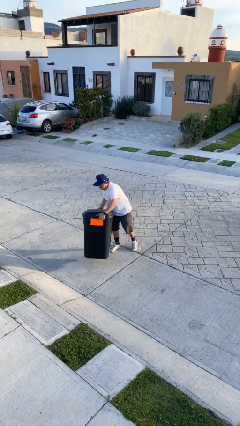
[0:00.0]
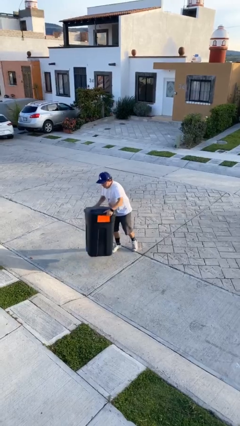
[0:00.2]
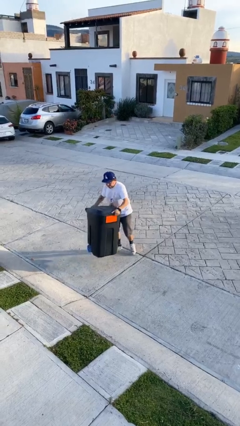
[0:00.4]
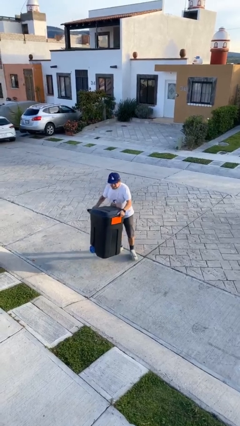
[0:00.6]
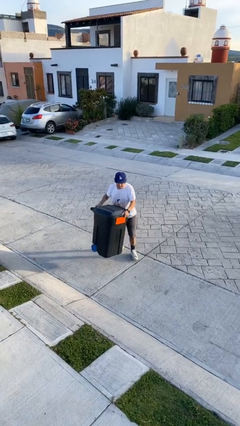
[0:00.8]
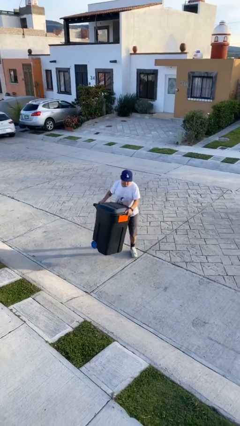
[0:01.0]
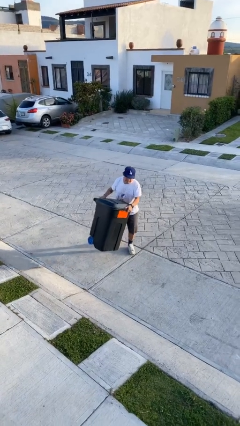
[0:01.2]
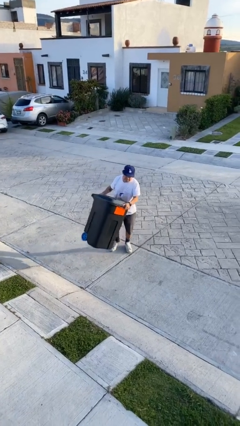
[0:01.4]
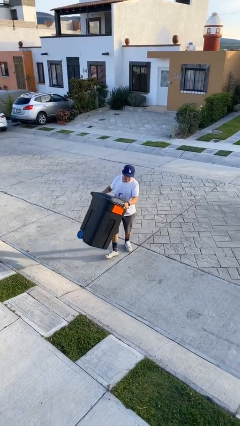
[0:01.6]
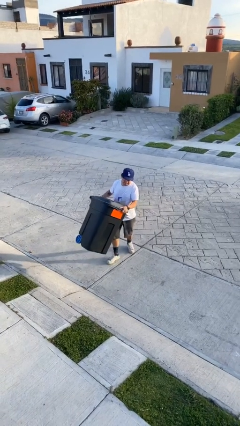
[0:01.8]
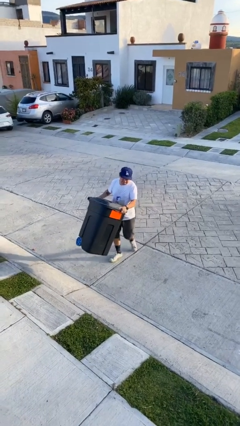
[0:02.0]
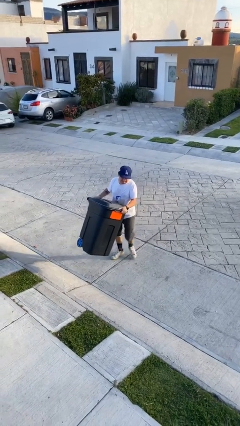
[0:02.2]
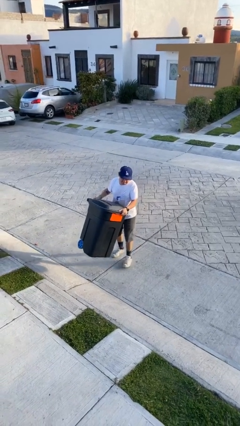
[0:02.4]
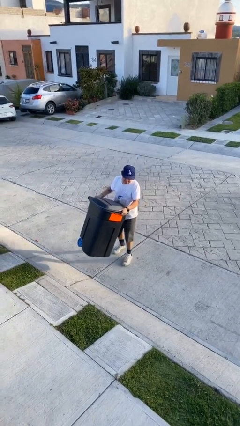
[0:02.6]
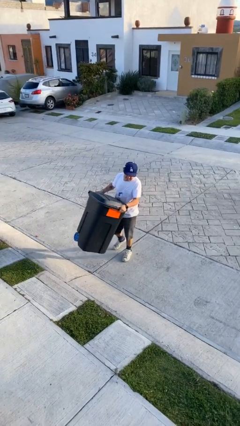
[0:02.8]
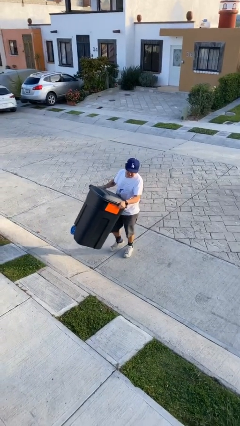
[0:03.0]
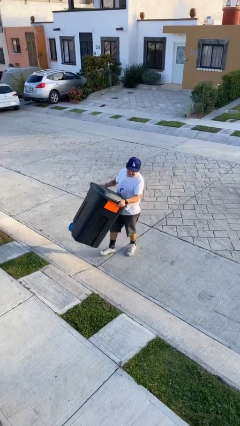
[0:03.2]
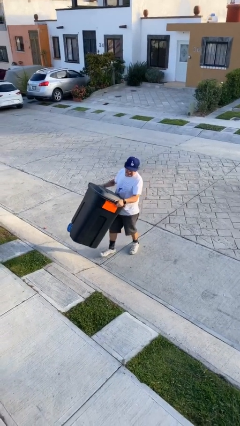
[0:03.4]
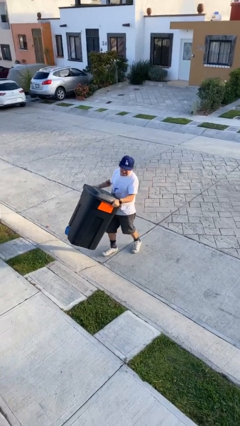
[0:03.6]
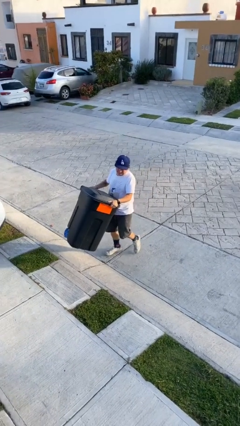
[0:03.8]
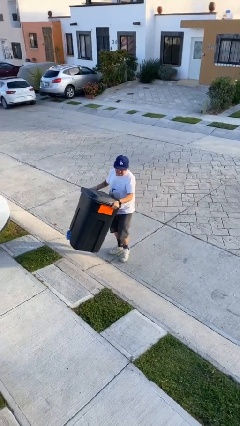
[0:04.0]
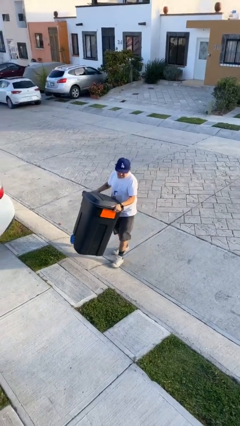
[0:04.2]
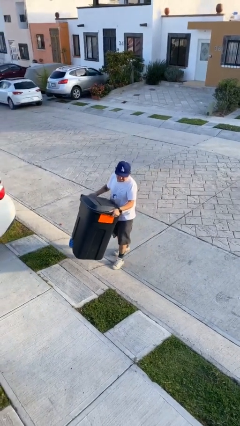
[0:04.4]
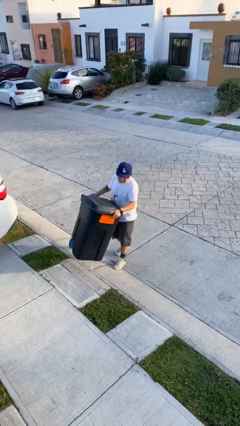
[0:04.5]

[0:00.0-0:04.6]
person carries heavy object

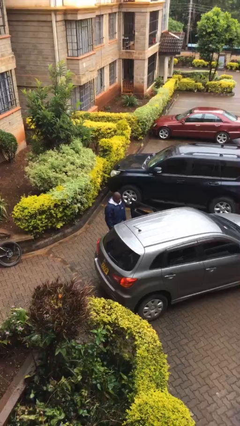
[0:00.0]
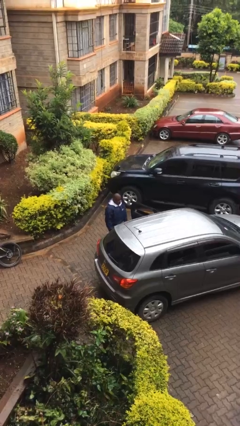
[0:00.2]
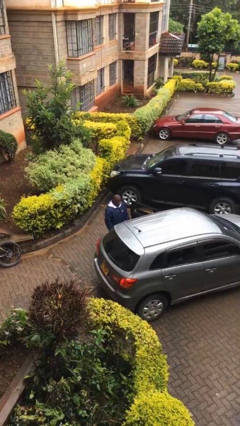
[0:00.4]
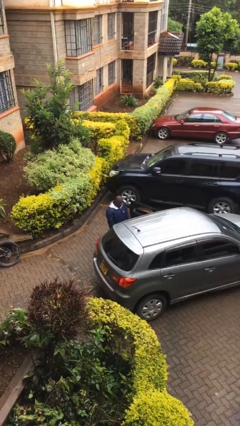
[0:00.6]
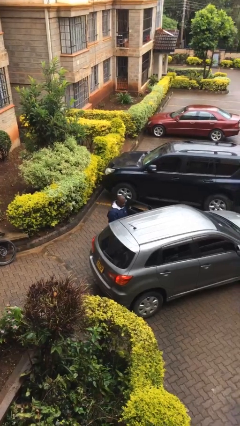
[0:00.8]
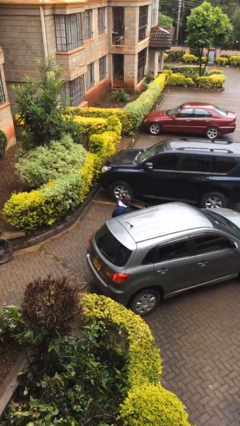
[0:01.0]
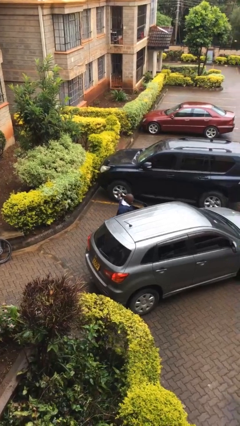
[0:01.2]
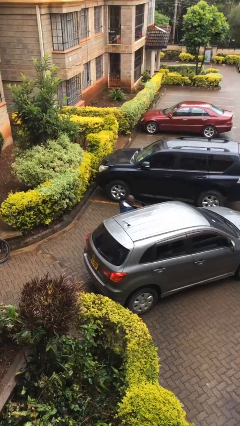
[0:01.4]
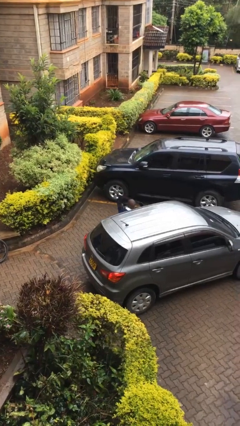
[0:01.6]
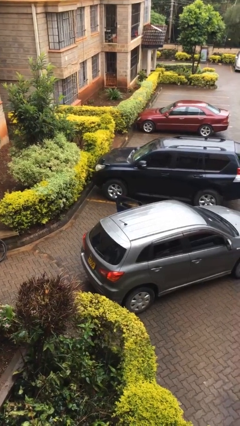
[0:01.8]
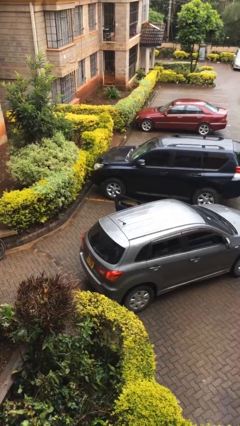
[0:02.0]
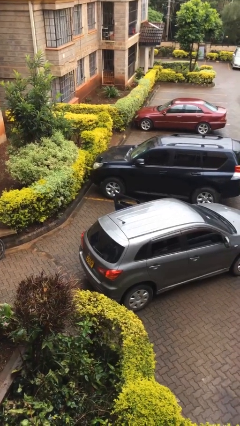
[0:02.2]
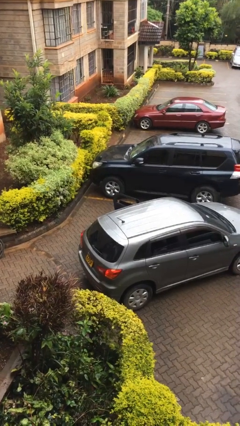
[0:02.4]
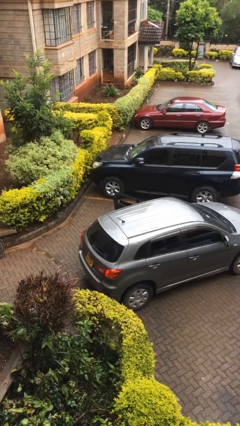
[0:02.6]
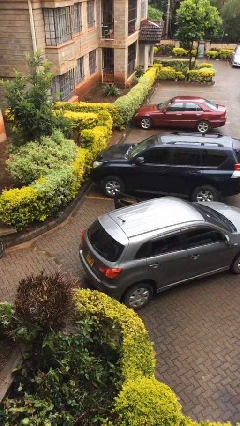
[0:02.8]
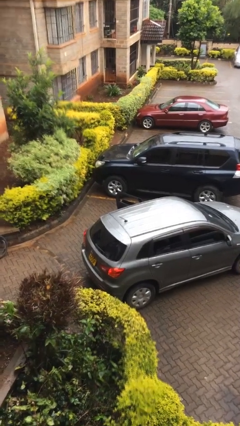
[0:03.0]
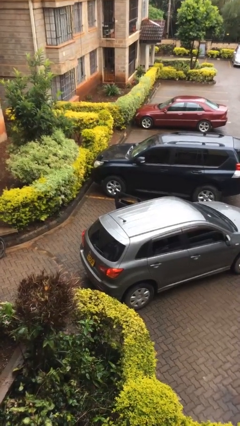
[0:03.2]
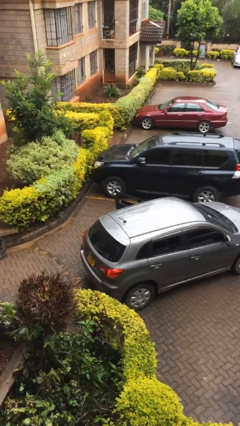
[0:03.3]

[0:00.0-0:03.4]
person enters car

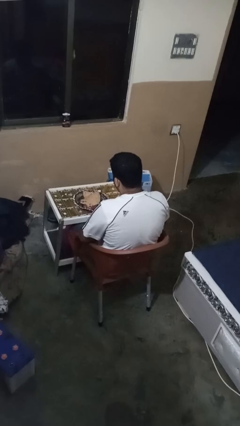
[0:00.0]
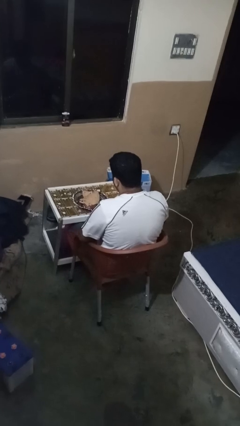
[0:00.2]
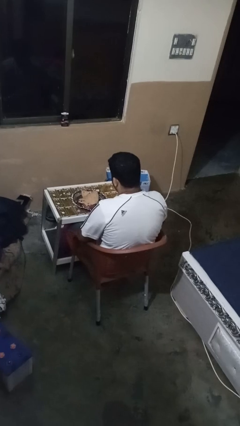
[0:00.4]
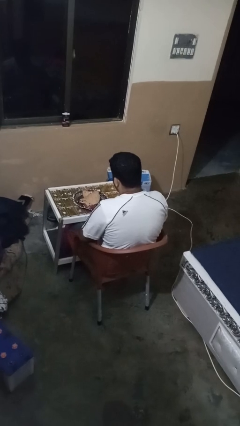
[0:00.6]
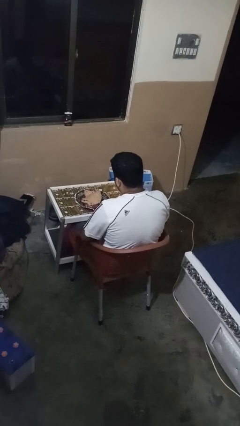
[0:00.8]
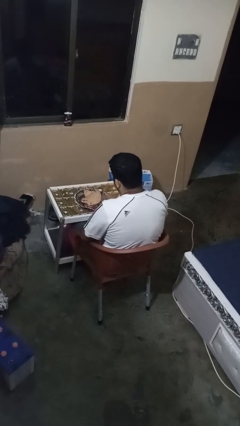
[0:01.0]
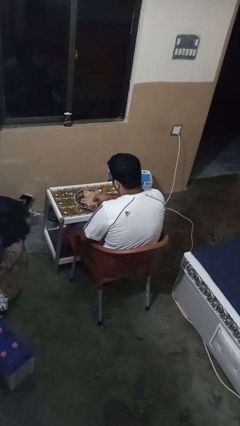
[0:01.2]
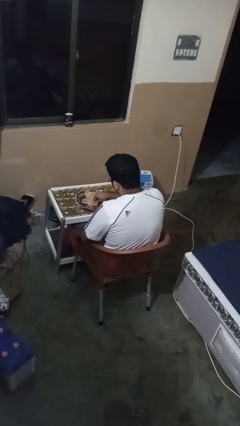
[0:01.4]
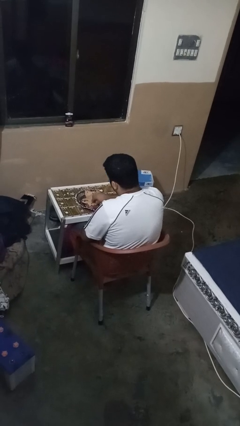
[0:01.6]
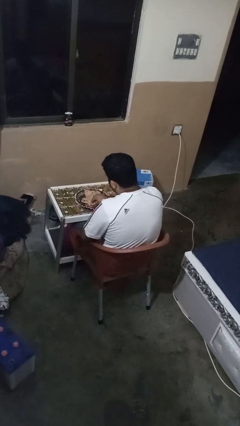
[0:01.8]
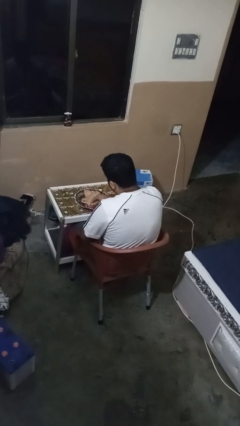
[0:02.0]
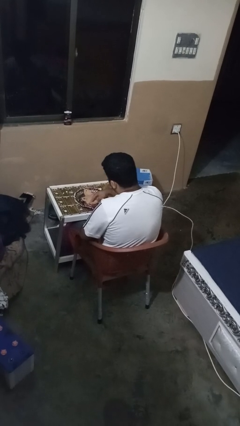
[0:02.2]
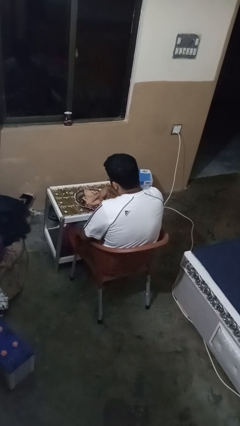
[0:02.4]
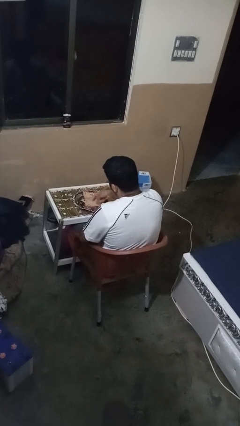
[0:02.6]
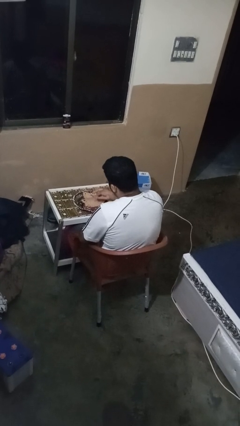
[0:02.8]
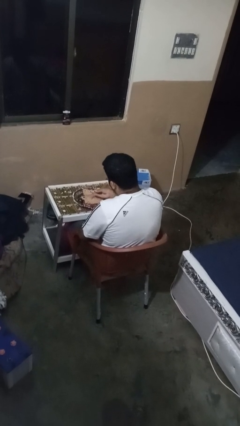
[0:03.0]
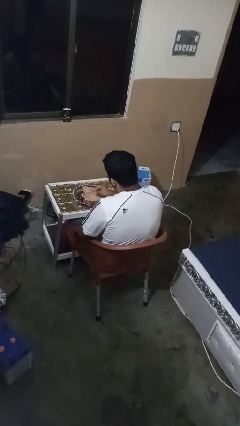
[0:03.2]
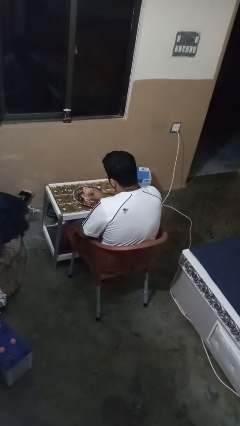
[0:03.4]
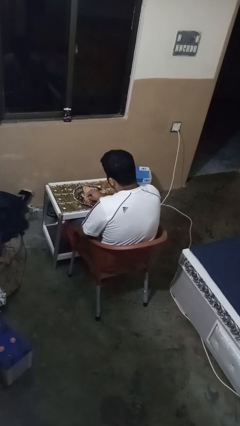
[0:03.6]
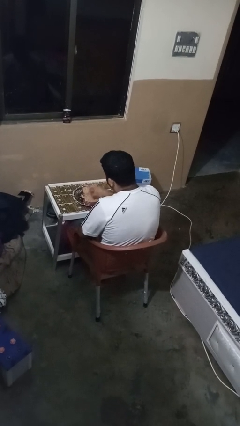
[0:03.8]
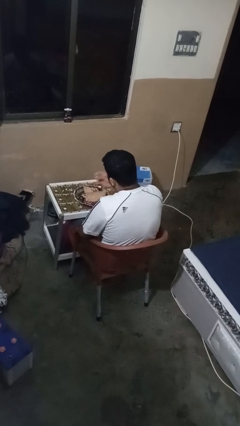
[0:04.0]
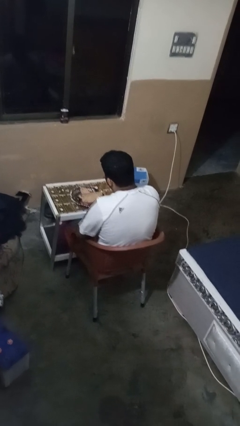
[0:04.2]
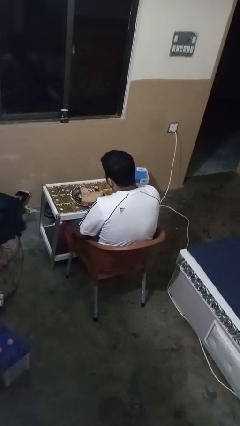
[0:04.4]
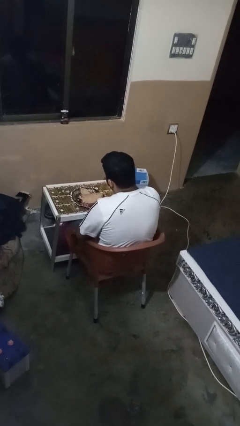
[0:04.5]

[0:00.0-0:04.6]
person eats with hands

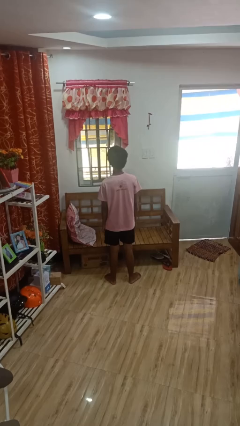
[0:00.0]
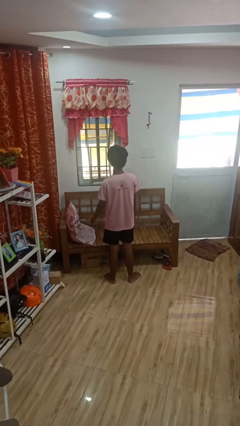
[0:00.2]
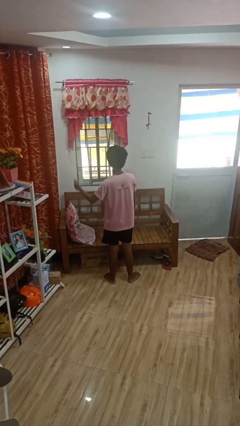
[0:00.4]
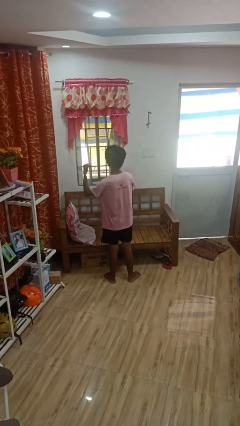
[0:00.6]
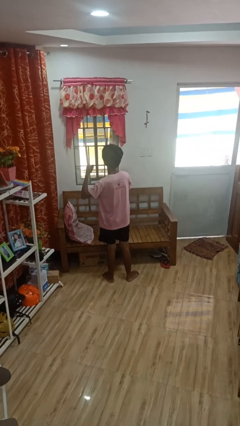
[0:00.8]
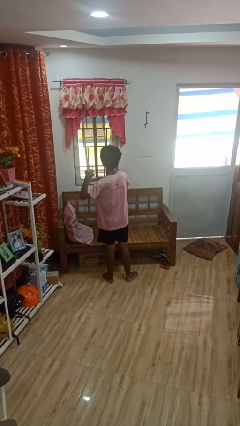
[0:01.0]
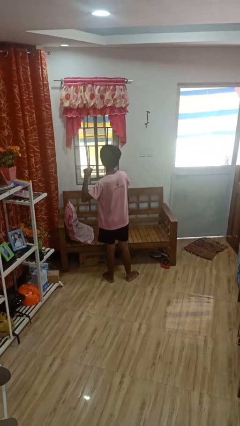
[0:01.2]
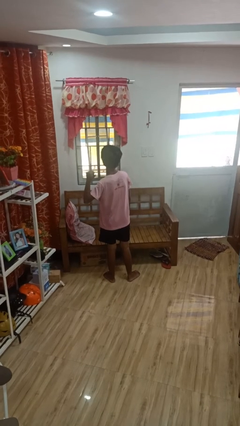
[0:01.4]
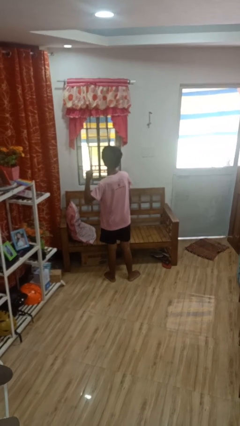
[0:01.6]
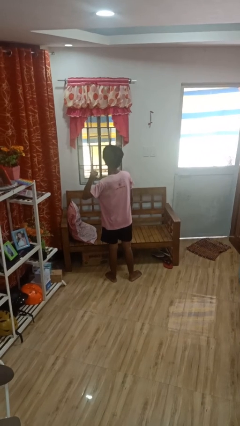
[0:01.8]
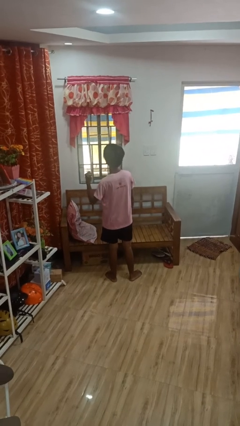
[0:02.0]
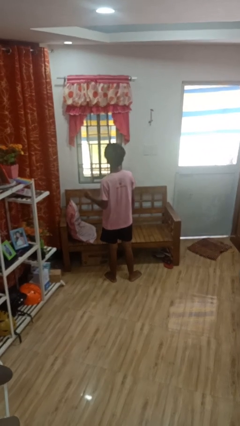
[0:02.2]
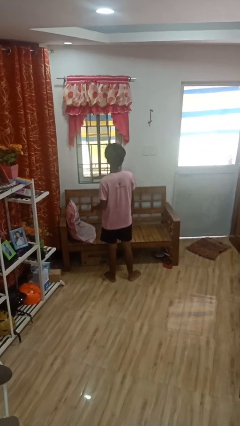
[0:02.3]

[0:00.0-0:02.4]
person gestures behind me

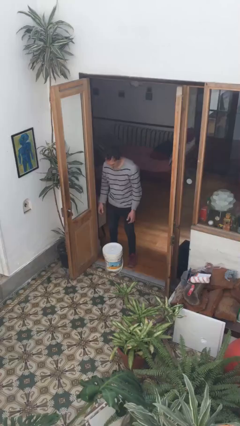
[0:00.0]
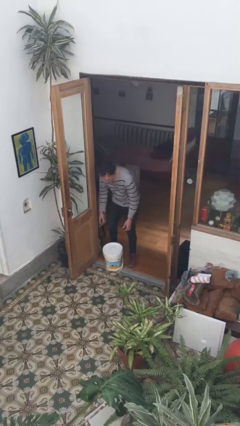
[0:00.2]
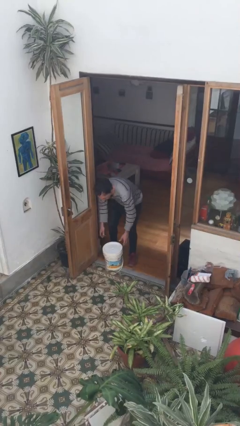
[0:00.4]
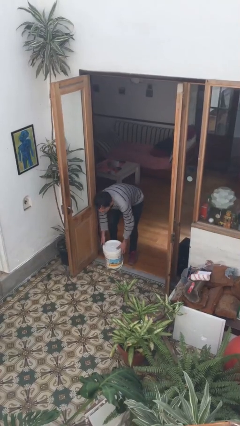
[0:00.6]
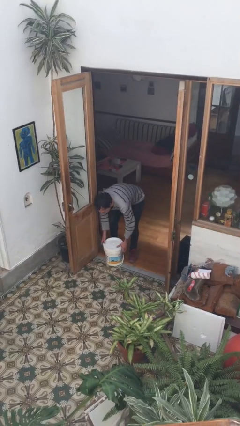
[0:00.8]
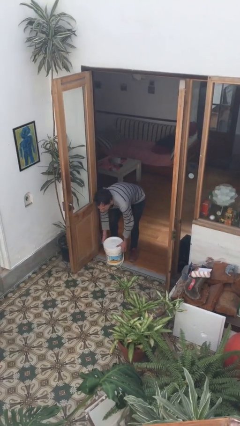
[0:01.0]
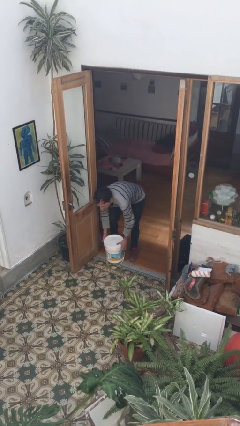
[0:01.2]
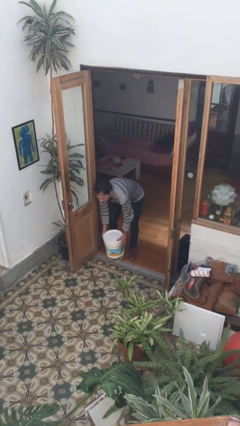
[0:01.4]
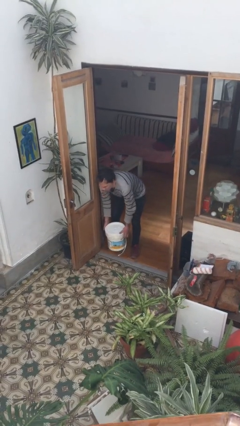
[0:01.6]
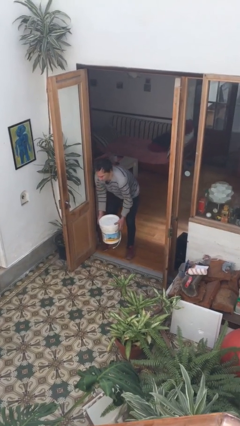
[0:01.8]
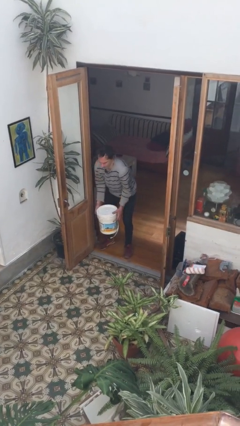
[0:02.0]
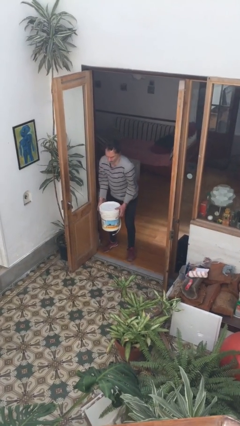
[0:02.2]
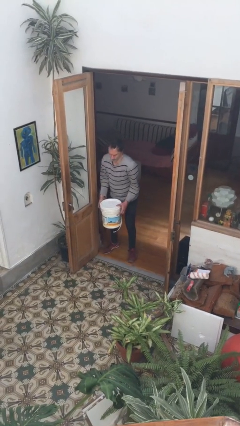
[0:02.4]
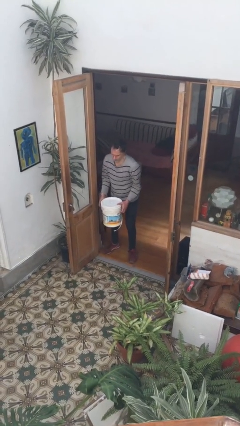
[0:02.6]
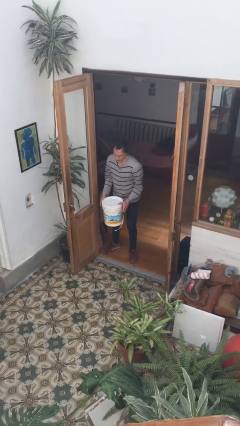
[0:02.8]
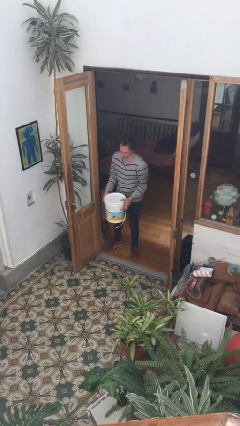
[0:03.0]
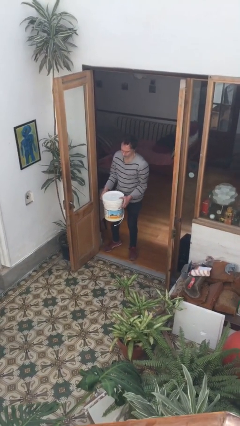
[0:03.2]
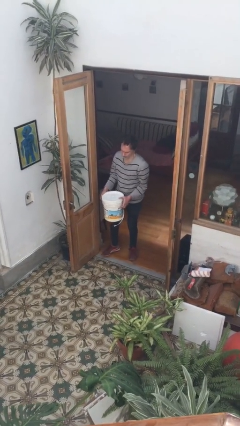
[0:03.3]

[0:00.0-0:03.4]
person picks up object from floor
